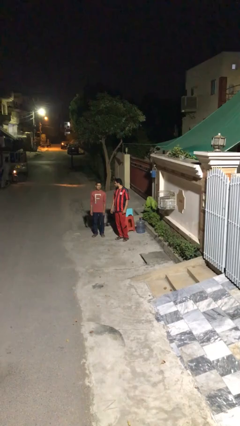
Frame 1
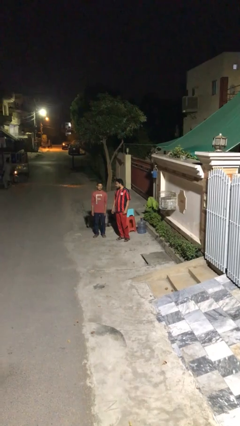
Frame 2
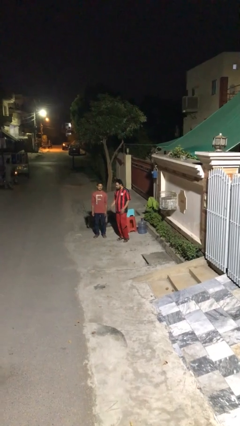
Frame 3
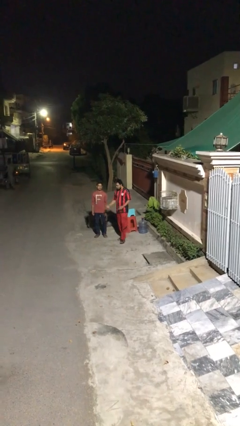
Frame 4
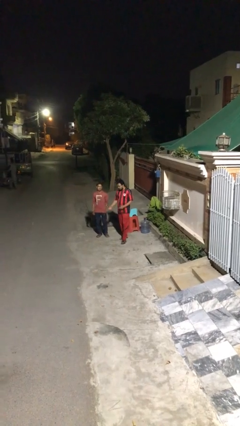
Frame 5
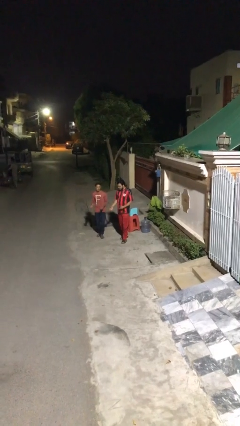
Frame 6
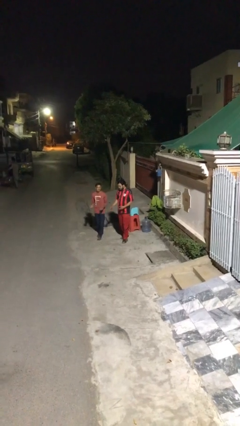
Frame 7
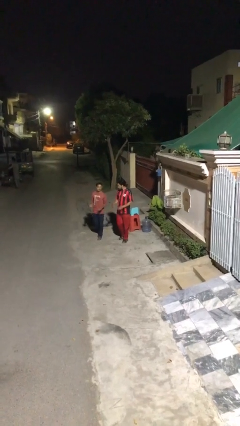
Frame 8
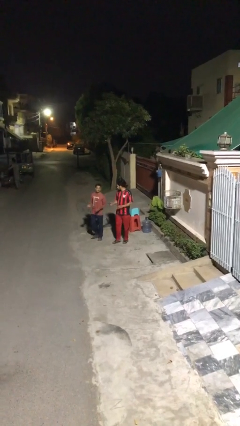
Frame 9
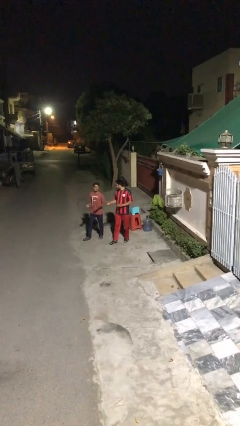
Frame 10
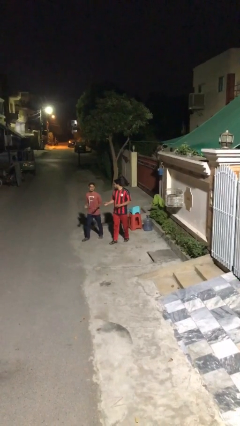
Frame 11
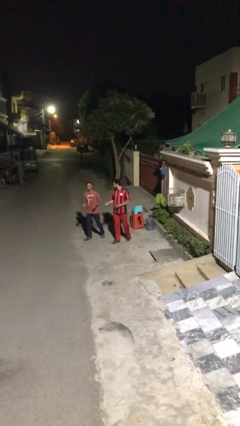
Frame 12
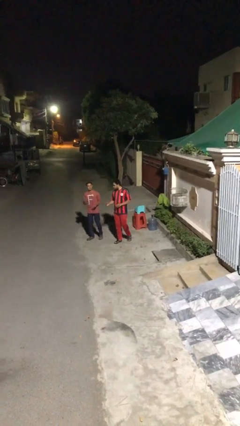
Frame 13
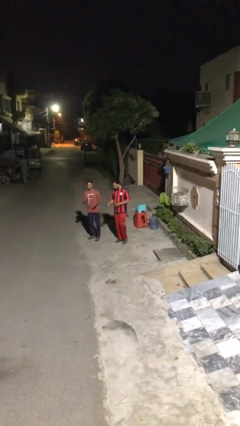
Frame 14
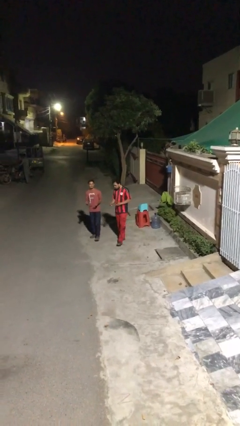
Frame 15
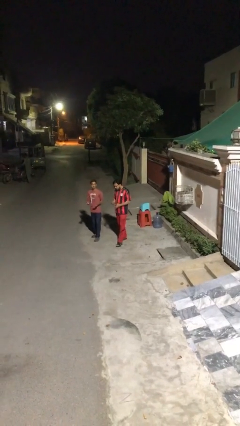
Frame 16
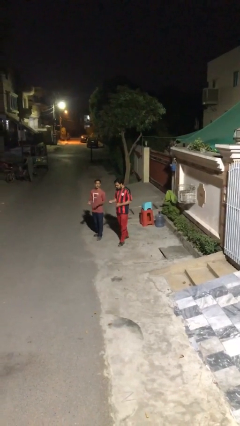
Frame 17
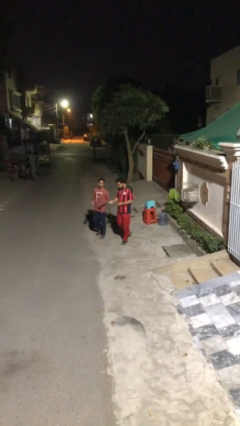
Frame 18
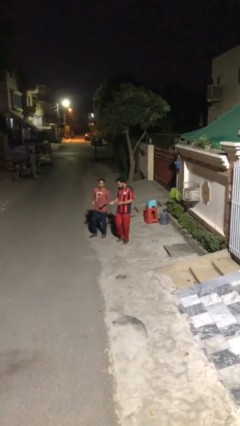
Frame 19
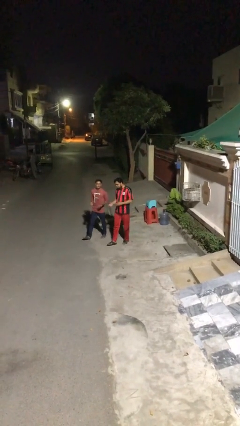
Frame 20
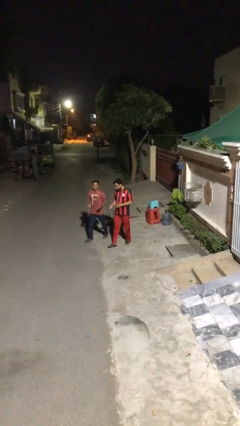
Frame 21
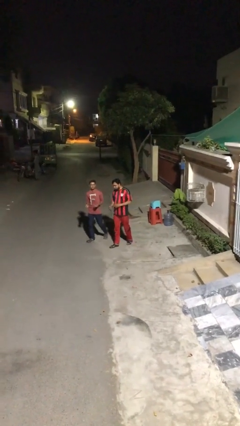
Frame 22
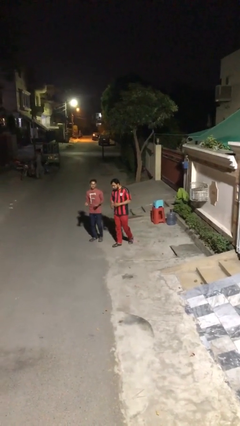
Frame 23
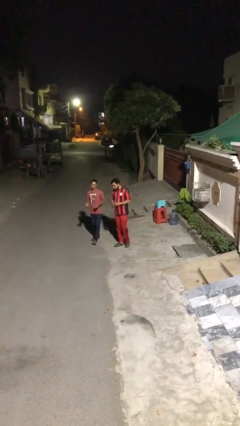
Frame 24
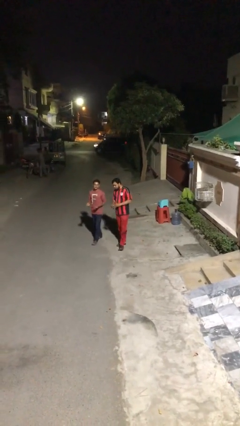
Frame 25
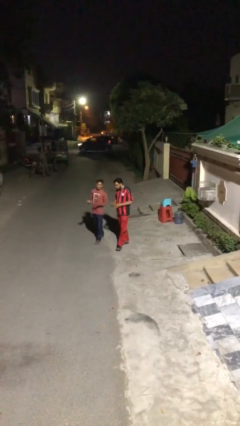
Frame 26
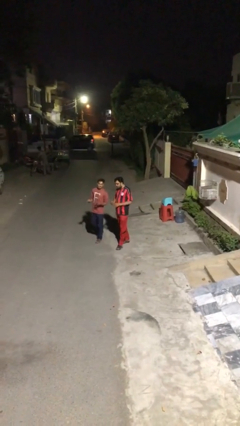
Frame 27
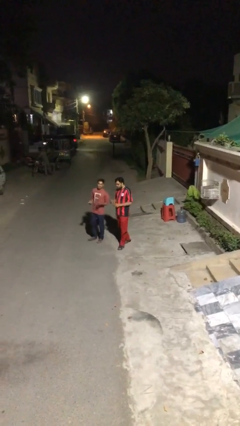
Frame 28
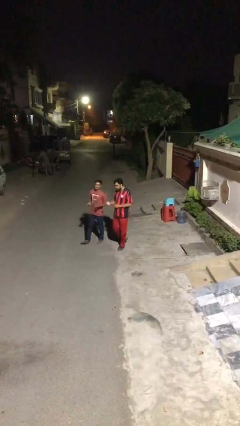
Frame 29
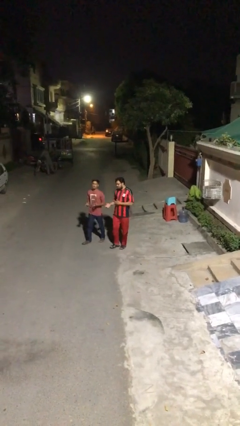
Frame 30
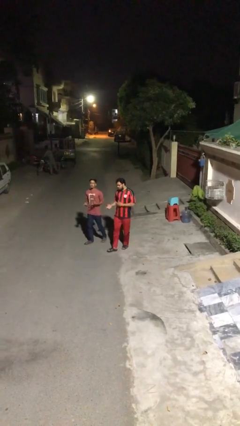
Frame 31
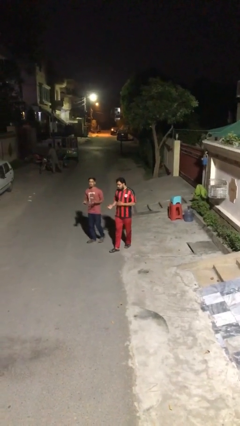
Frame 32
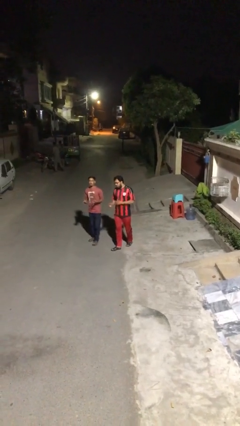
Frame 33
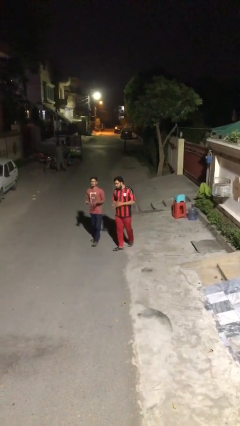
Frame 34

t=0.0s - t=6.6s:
person talks to person

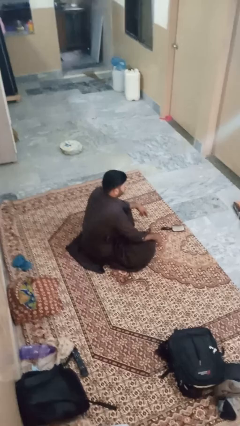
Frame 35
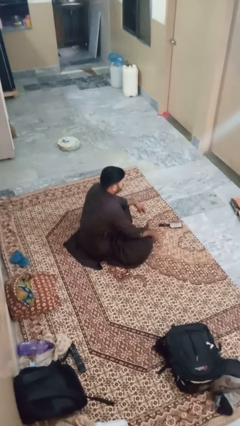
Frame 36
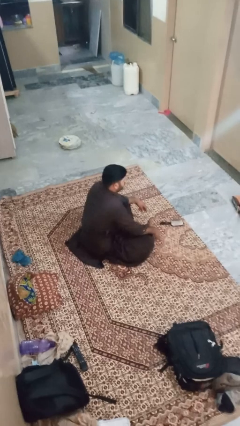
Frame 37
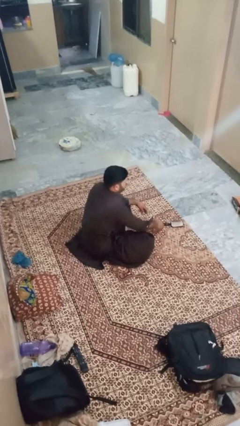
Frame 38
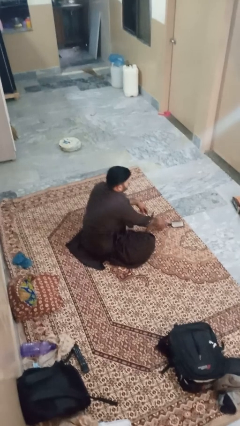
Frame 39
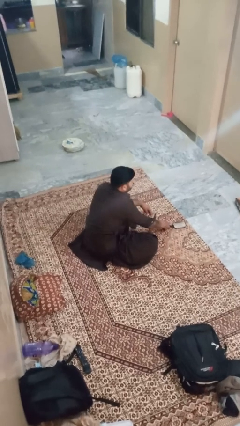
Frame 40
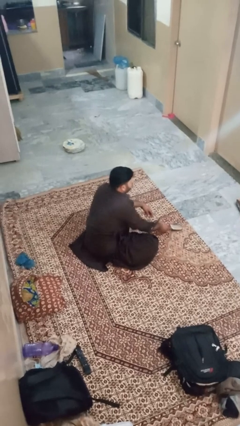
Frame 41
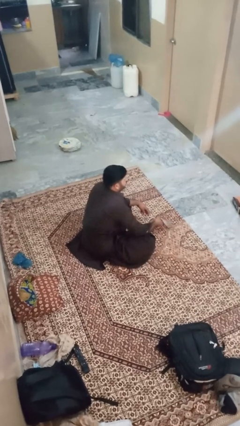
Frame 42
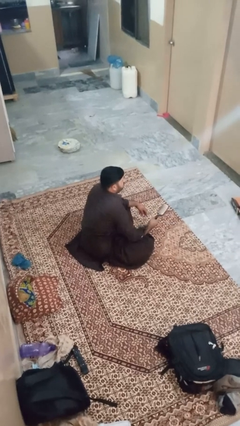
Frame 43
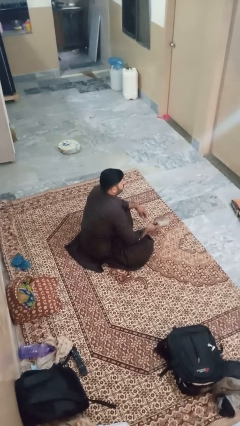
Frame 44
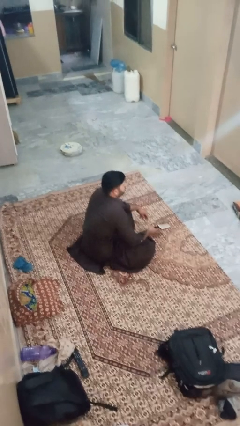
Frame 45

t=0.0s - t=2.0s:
person picks up object from floor

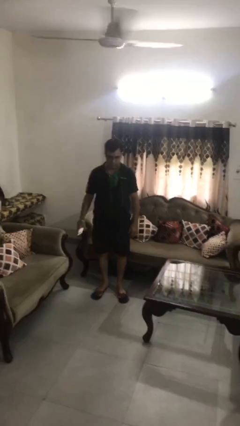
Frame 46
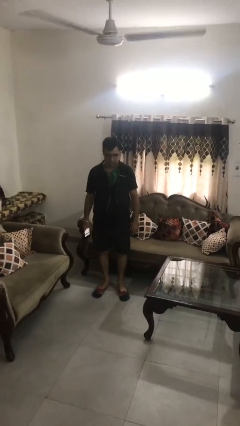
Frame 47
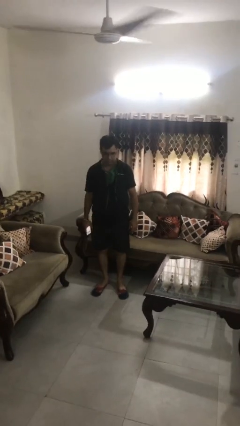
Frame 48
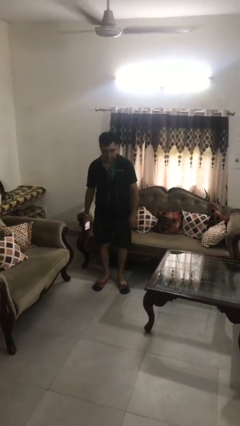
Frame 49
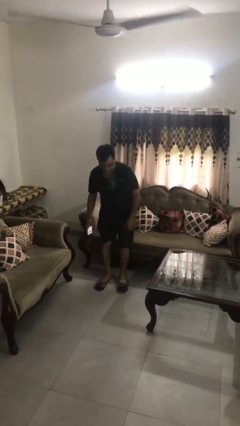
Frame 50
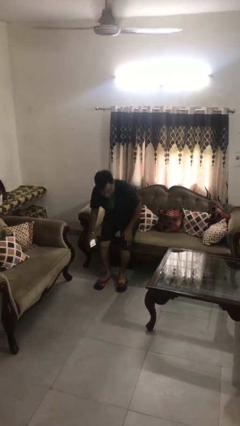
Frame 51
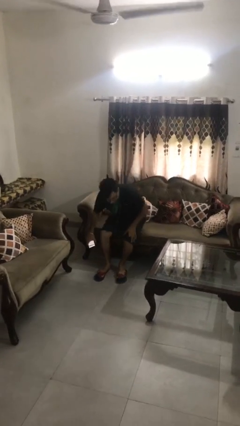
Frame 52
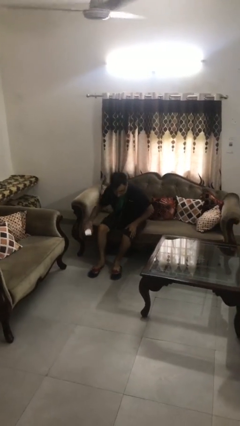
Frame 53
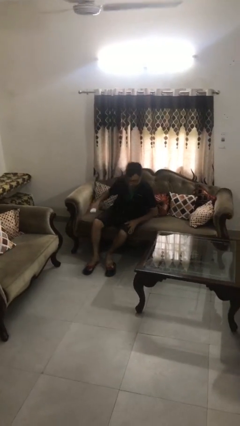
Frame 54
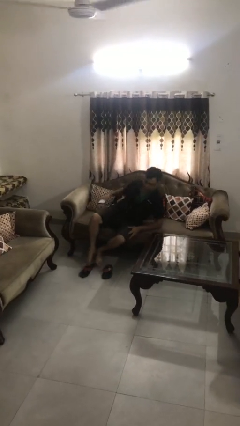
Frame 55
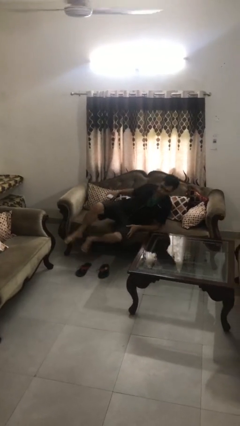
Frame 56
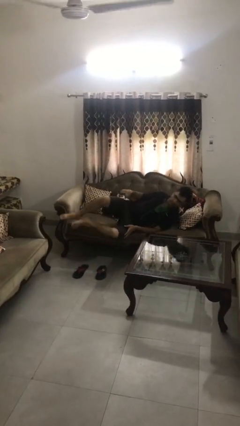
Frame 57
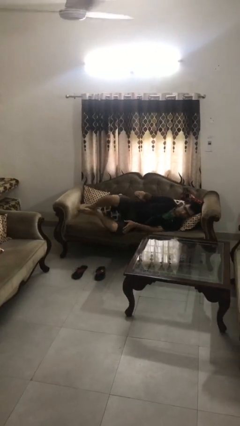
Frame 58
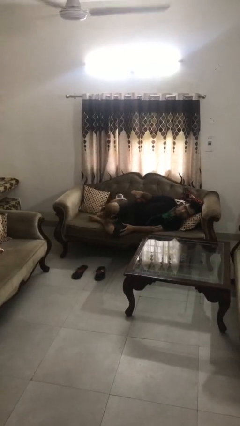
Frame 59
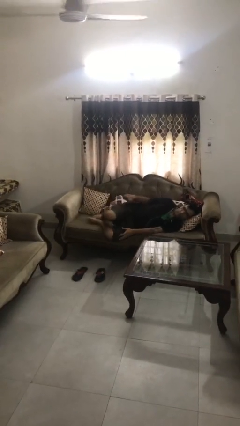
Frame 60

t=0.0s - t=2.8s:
person lies down on couch

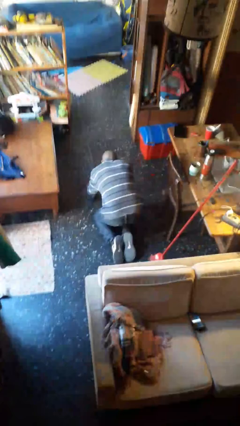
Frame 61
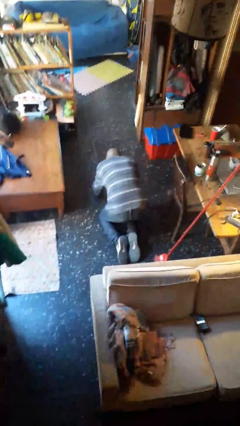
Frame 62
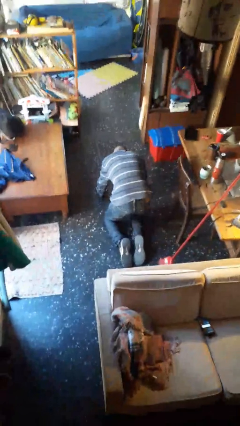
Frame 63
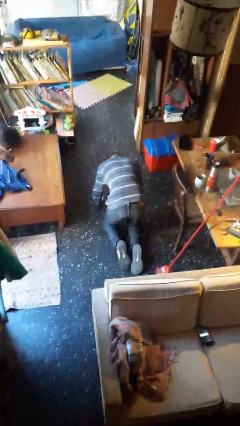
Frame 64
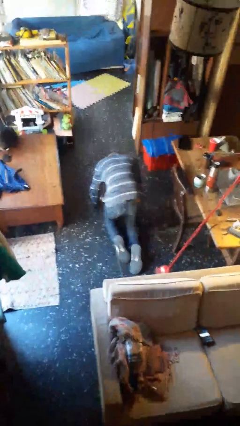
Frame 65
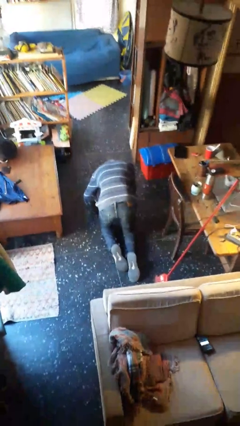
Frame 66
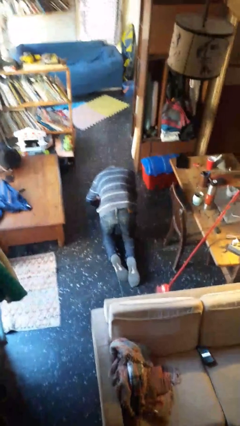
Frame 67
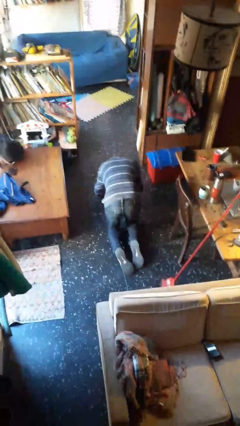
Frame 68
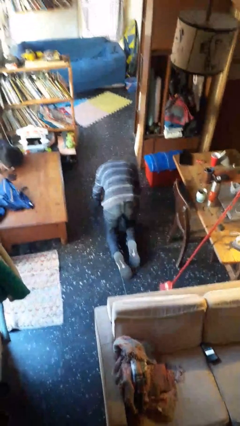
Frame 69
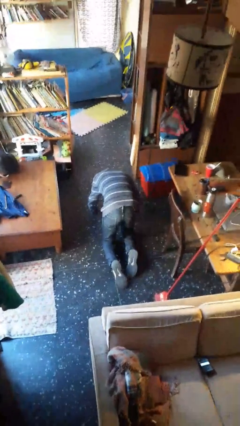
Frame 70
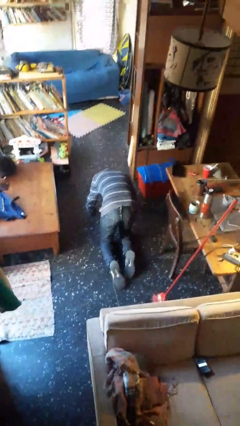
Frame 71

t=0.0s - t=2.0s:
person crawls

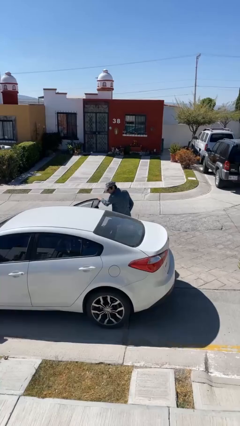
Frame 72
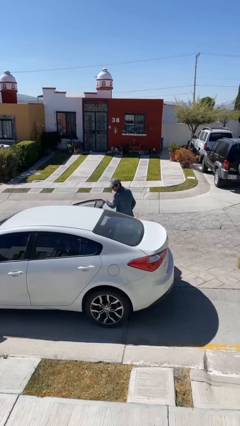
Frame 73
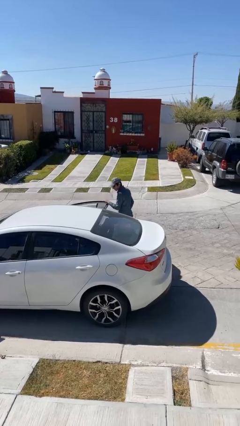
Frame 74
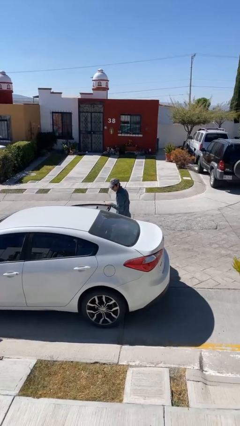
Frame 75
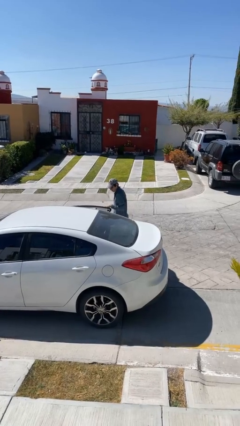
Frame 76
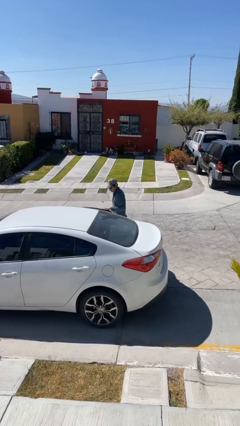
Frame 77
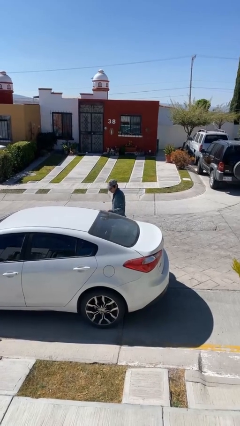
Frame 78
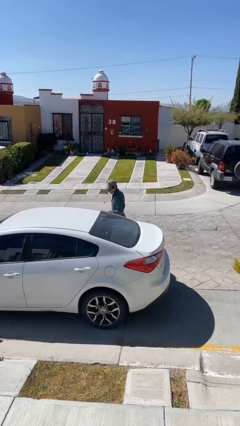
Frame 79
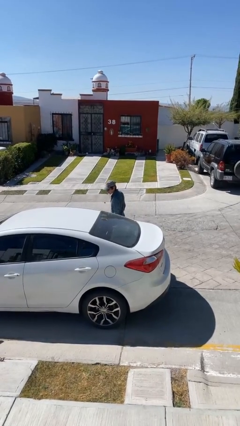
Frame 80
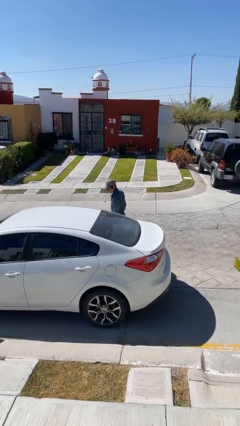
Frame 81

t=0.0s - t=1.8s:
person closes car door

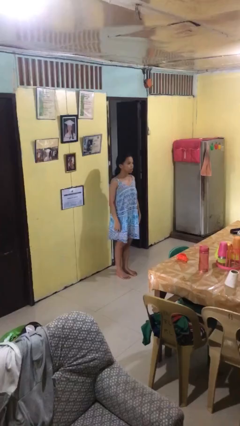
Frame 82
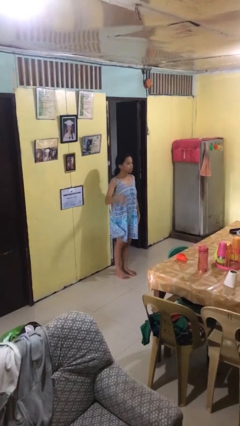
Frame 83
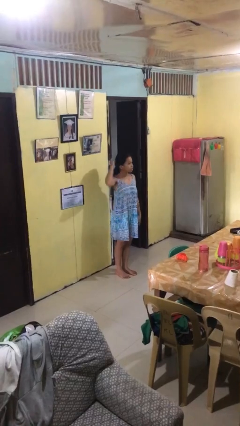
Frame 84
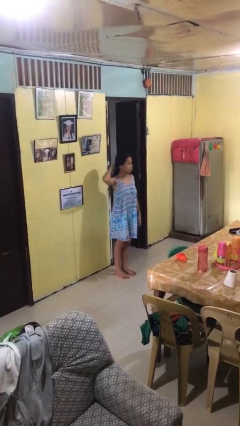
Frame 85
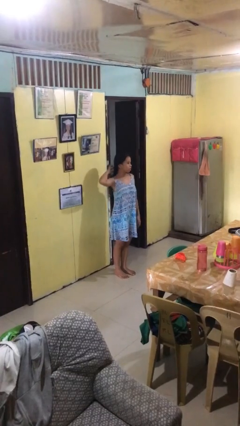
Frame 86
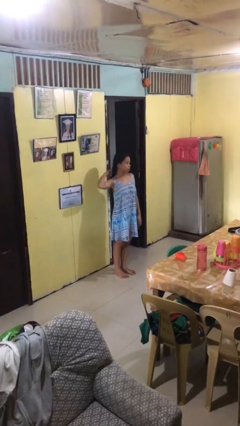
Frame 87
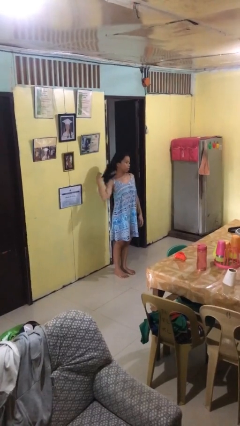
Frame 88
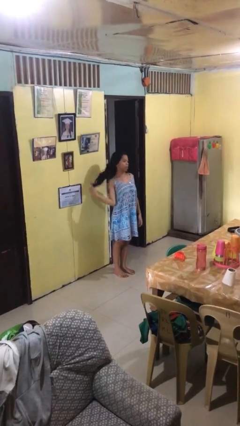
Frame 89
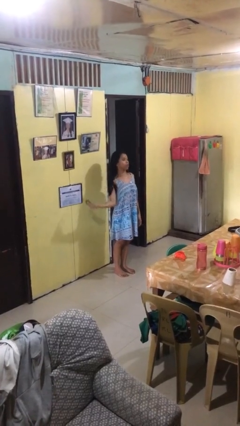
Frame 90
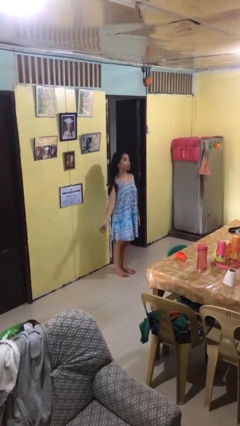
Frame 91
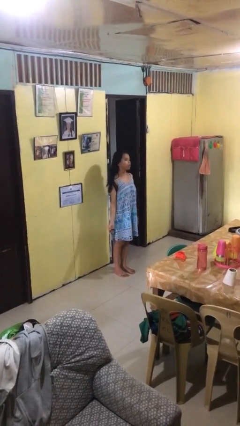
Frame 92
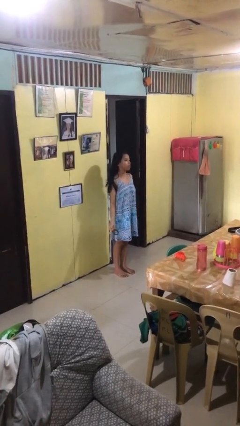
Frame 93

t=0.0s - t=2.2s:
person takes off hairtie
